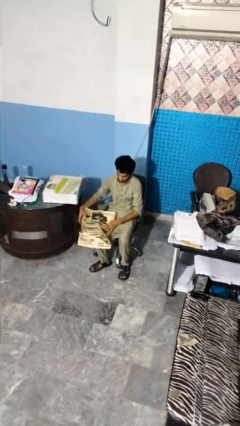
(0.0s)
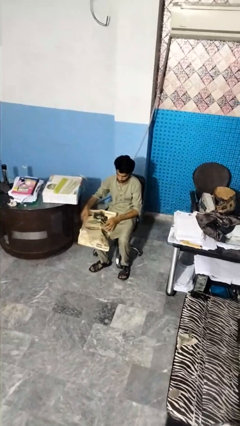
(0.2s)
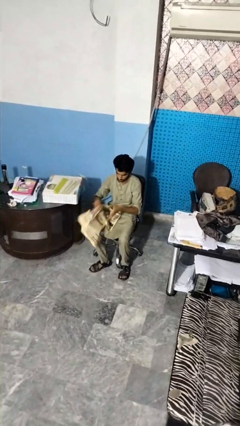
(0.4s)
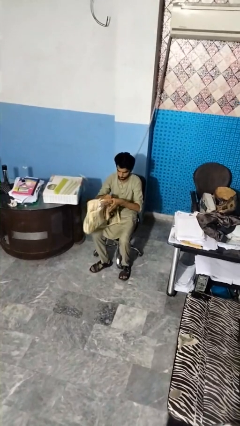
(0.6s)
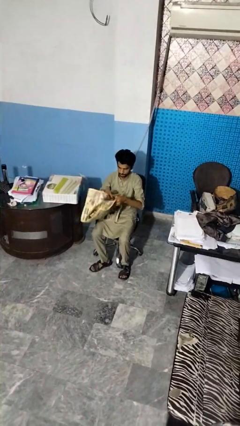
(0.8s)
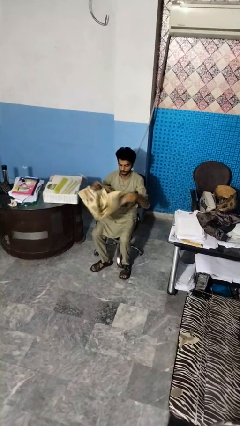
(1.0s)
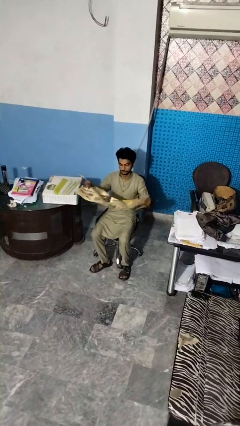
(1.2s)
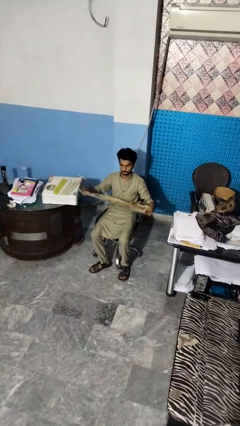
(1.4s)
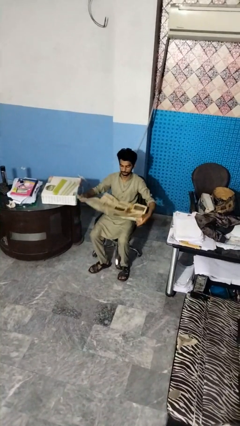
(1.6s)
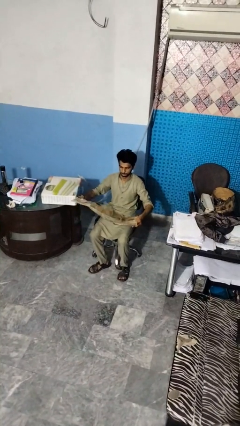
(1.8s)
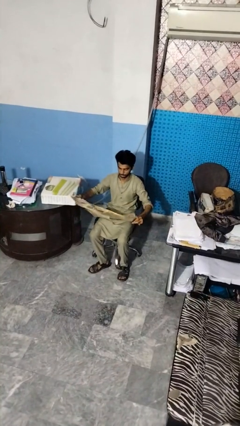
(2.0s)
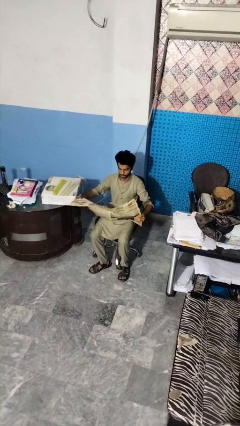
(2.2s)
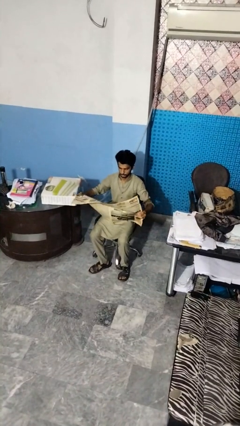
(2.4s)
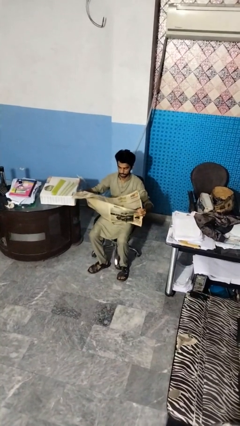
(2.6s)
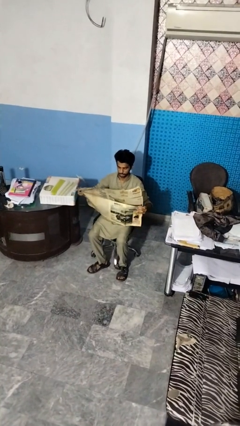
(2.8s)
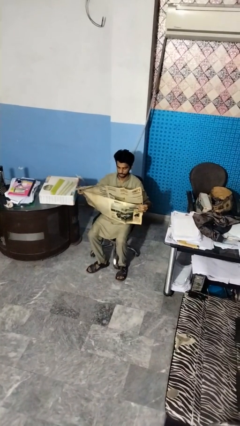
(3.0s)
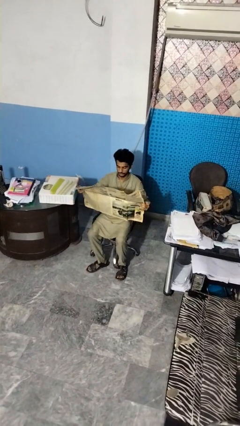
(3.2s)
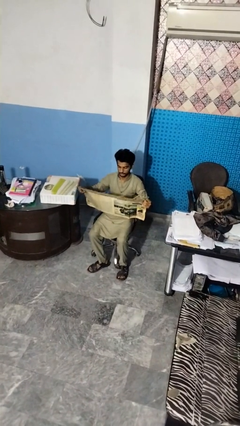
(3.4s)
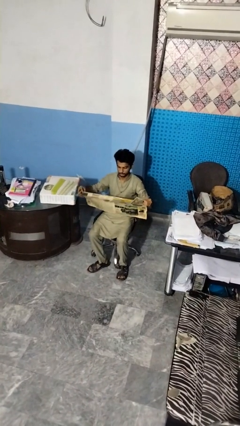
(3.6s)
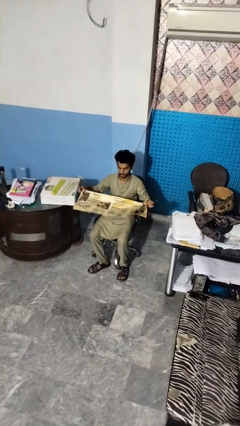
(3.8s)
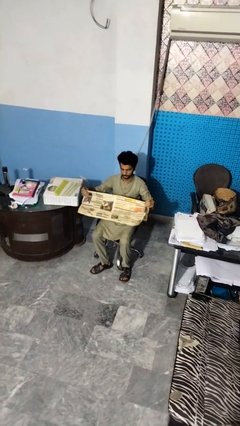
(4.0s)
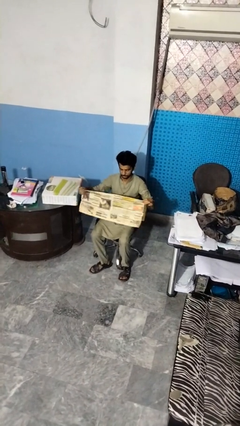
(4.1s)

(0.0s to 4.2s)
person reads newspaper

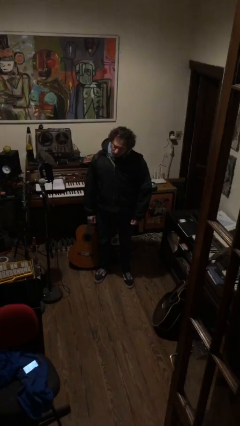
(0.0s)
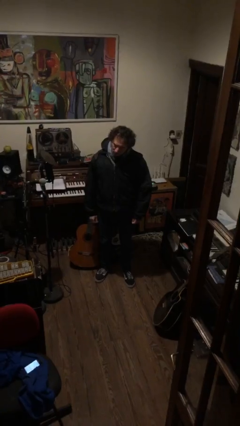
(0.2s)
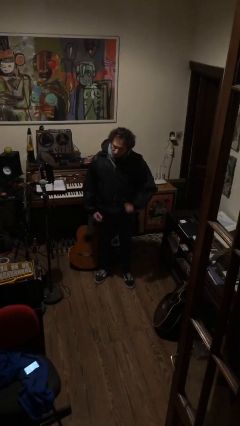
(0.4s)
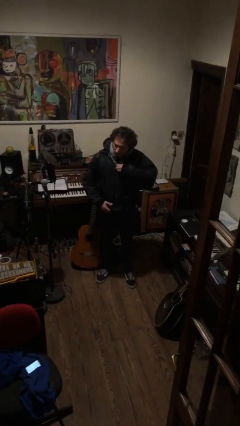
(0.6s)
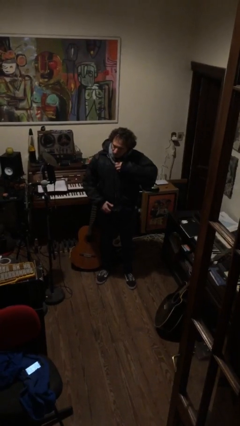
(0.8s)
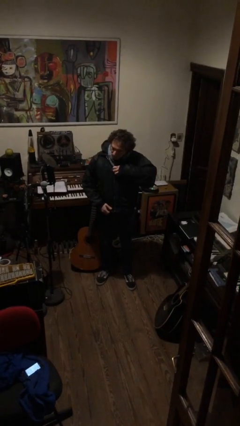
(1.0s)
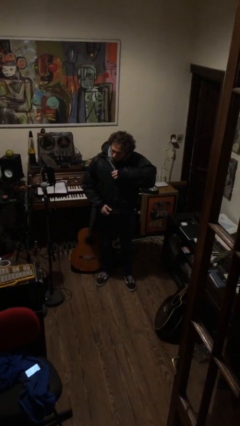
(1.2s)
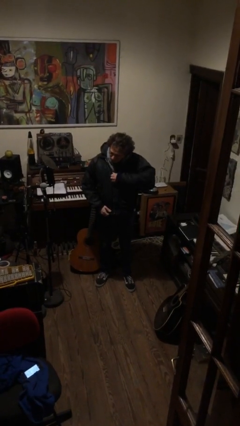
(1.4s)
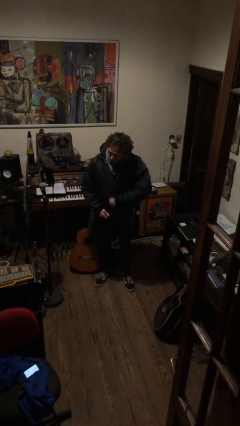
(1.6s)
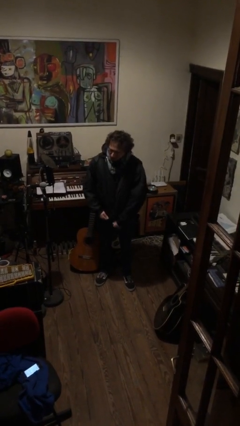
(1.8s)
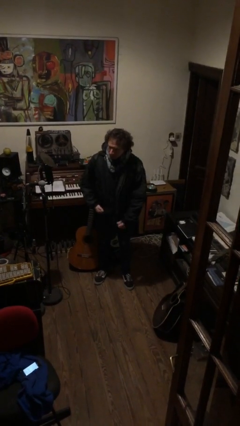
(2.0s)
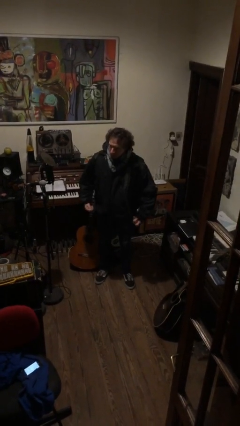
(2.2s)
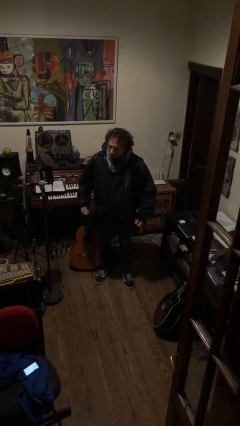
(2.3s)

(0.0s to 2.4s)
person unzips jacket

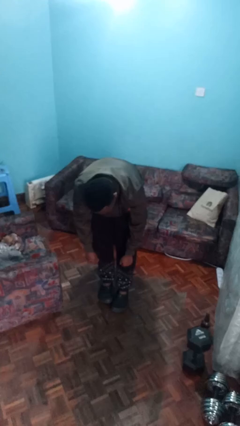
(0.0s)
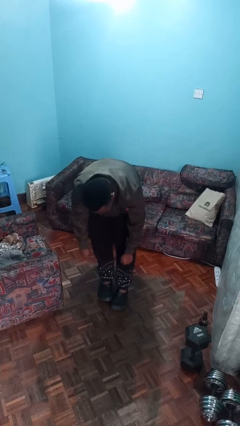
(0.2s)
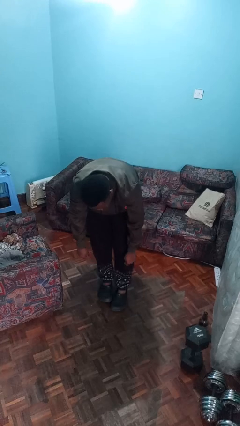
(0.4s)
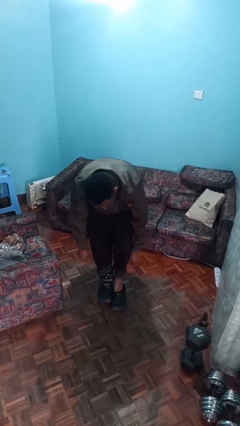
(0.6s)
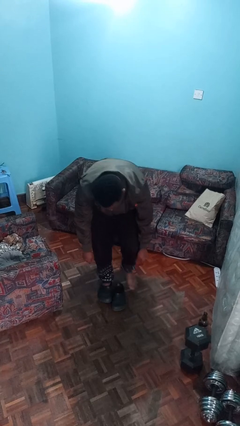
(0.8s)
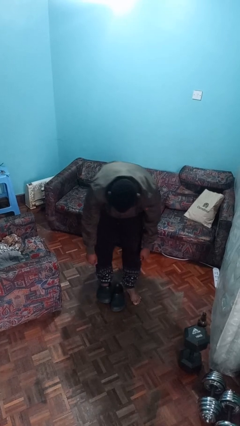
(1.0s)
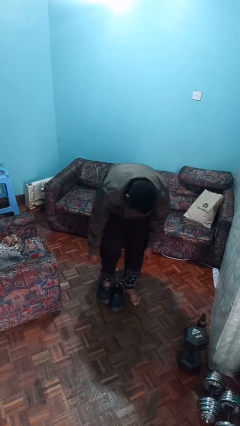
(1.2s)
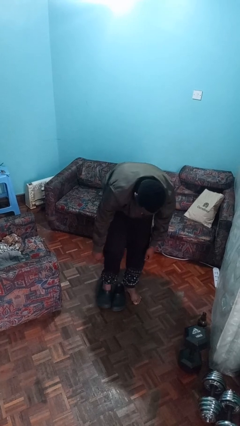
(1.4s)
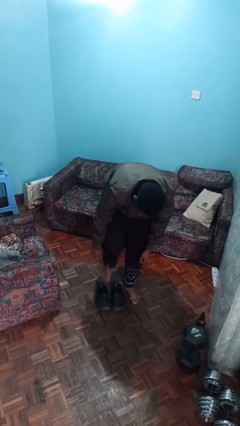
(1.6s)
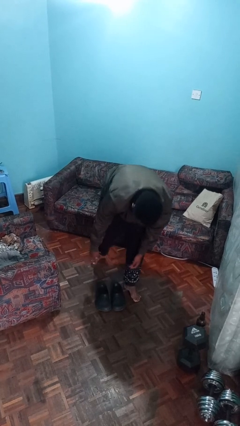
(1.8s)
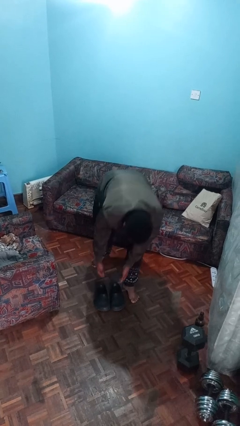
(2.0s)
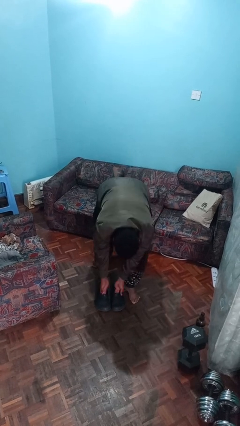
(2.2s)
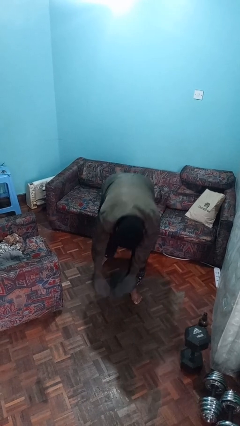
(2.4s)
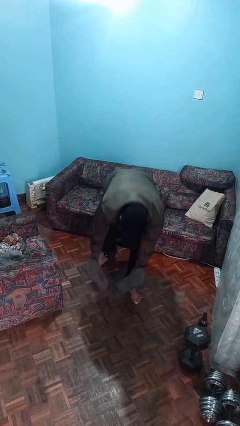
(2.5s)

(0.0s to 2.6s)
person takes off shoes

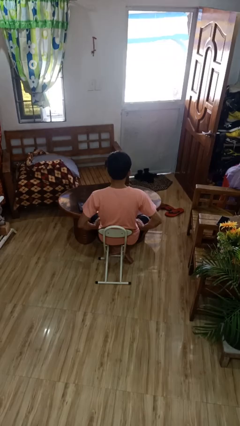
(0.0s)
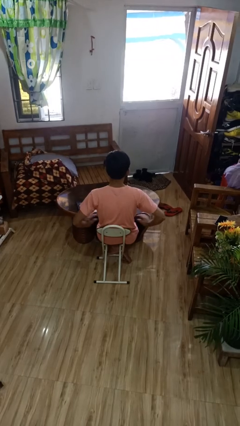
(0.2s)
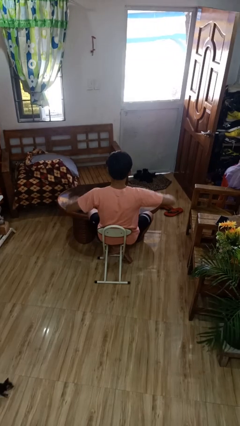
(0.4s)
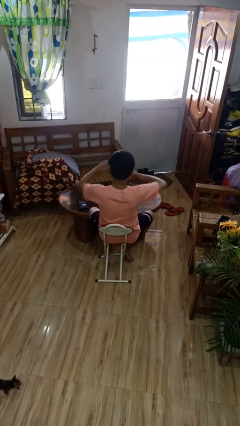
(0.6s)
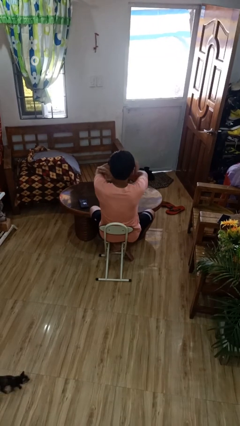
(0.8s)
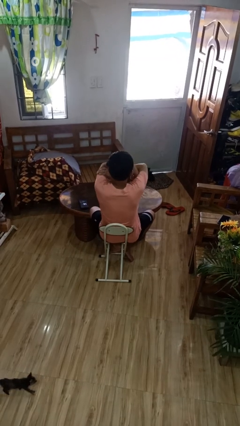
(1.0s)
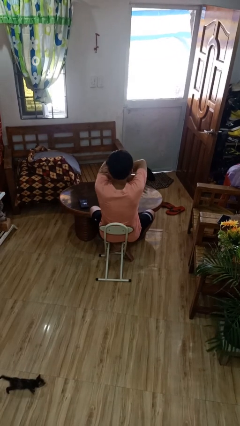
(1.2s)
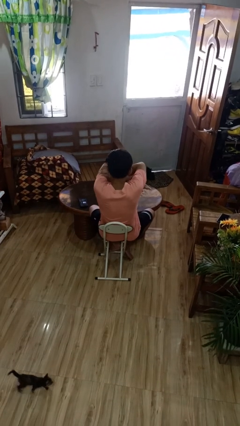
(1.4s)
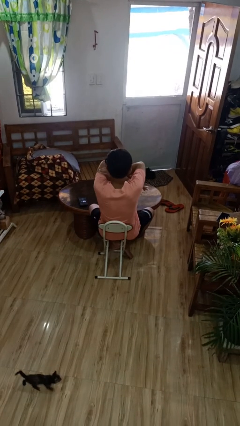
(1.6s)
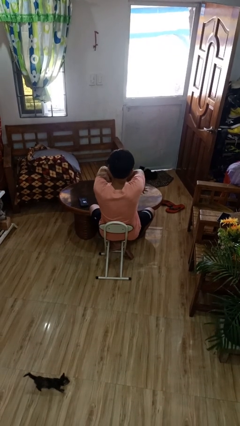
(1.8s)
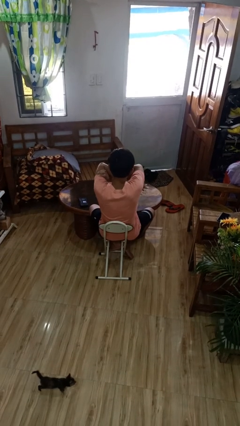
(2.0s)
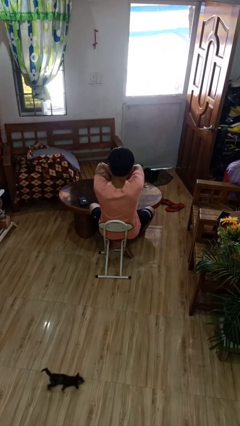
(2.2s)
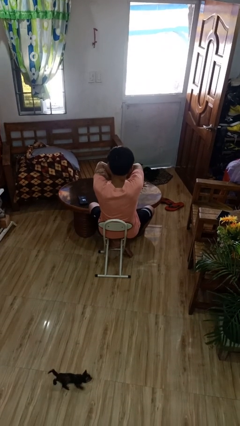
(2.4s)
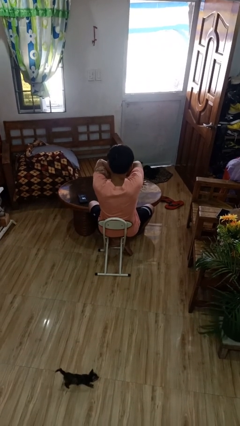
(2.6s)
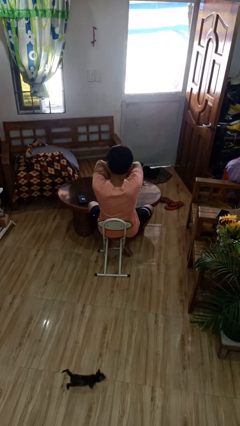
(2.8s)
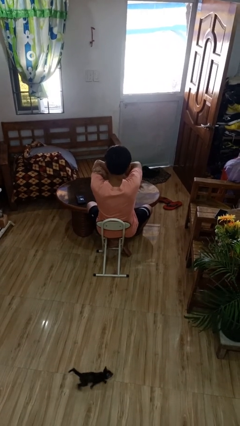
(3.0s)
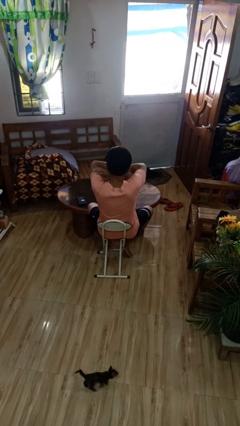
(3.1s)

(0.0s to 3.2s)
person crosses arms

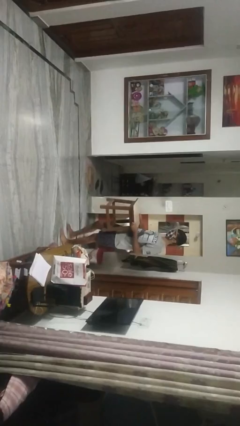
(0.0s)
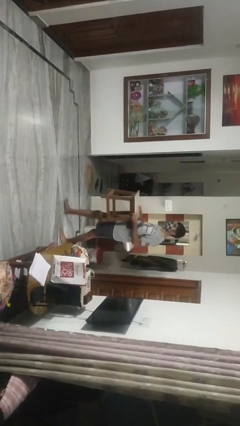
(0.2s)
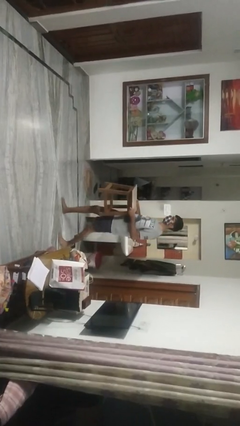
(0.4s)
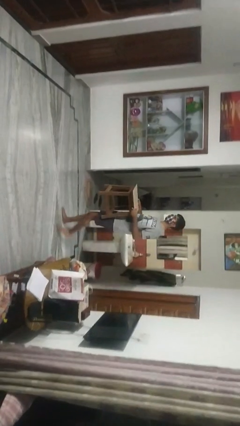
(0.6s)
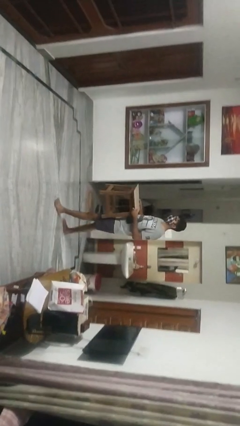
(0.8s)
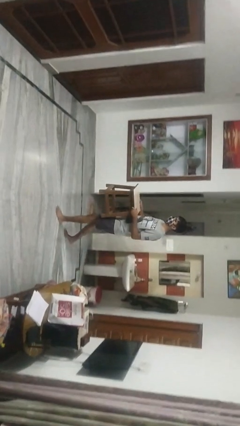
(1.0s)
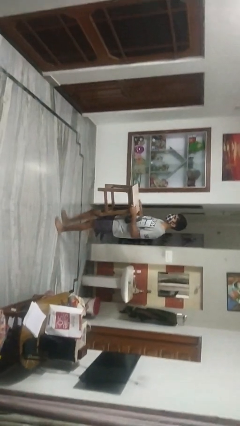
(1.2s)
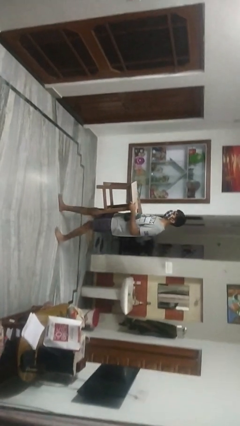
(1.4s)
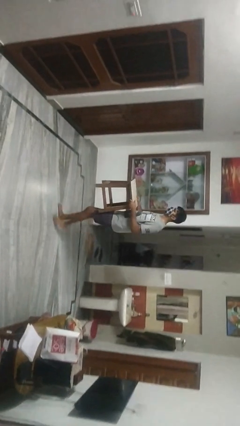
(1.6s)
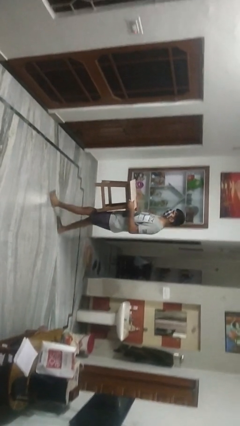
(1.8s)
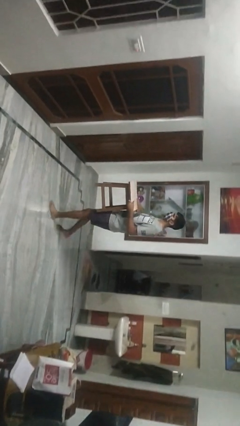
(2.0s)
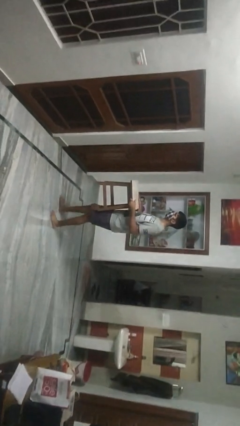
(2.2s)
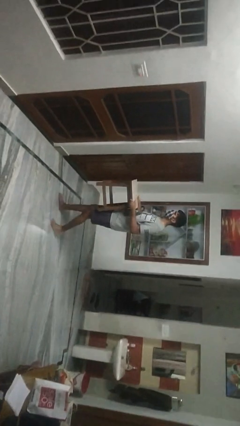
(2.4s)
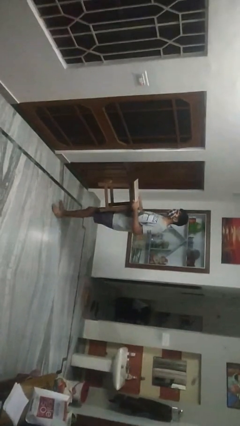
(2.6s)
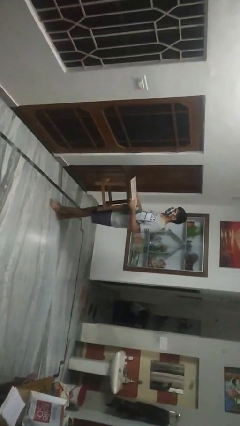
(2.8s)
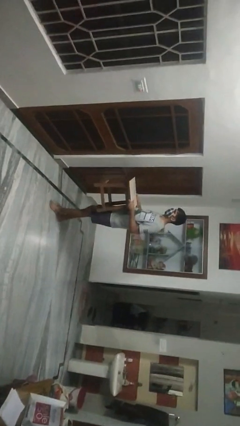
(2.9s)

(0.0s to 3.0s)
person carries furniture

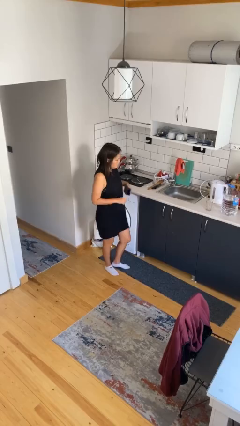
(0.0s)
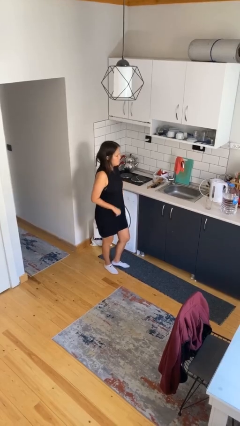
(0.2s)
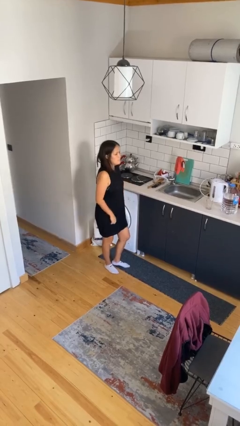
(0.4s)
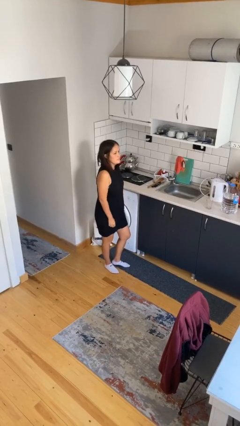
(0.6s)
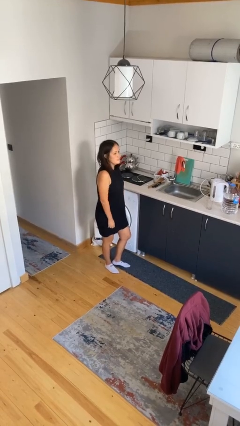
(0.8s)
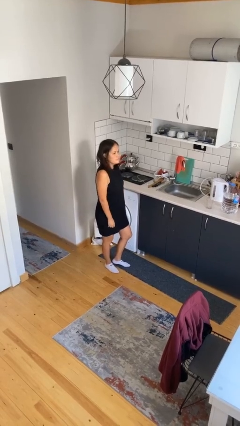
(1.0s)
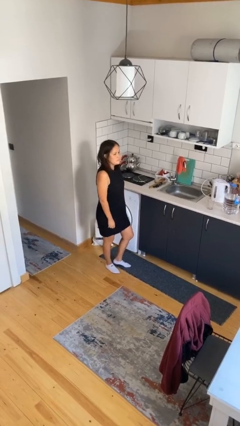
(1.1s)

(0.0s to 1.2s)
person puts phone into pocket

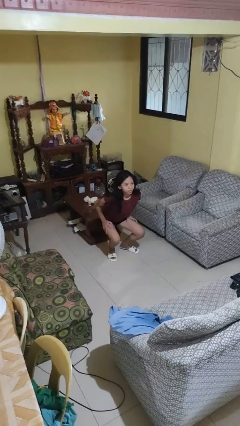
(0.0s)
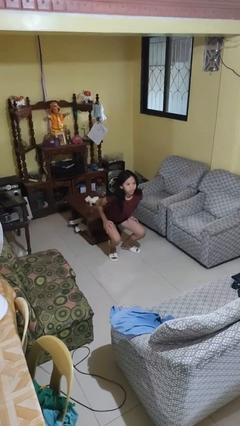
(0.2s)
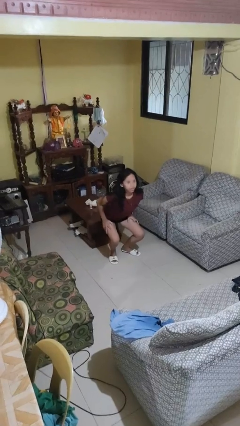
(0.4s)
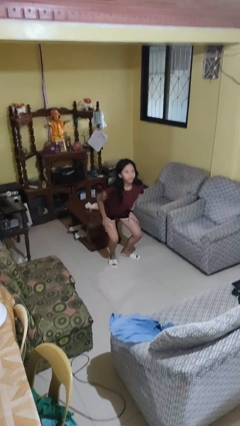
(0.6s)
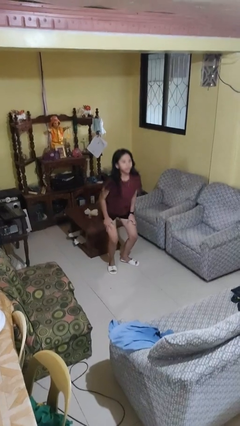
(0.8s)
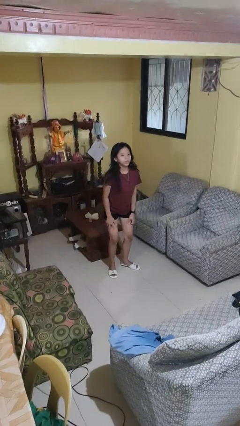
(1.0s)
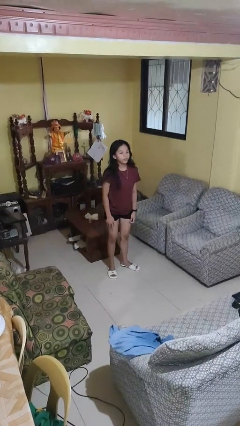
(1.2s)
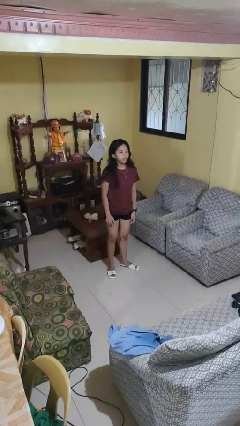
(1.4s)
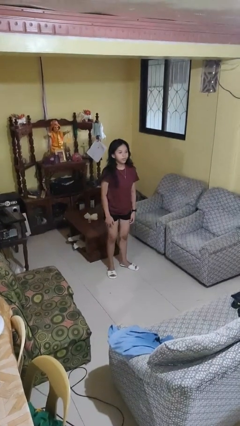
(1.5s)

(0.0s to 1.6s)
person stands up
